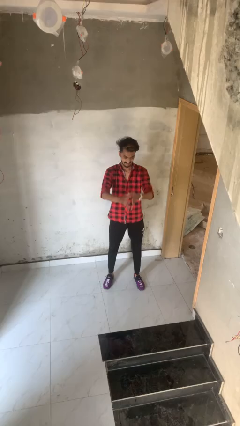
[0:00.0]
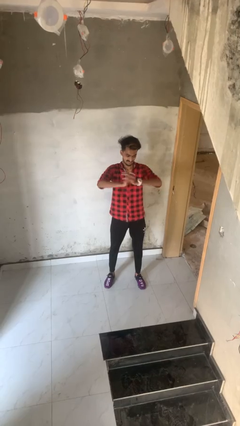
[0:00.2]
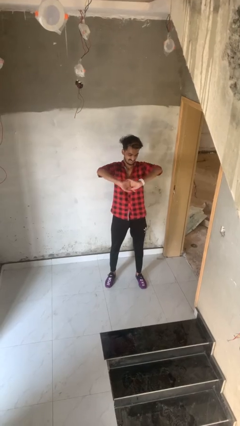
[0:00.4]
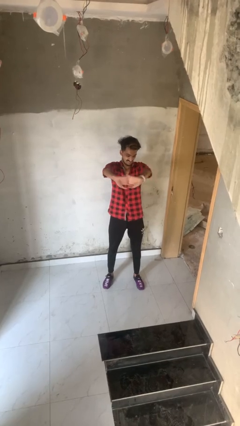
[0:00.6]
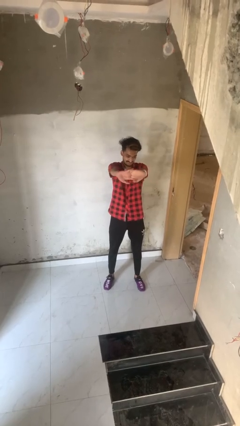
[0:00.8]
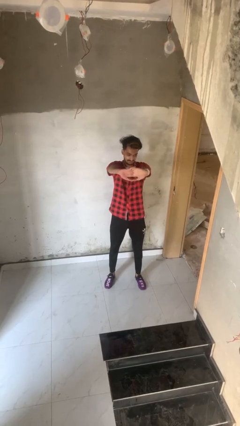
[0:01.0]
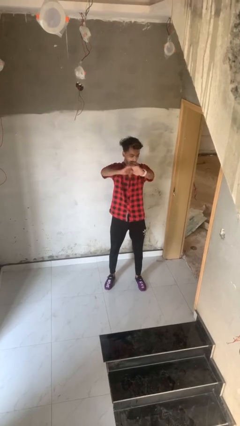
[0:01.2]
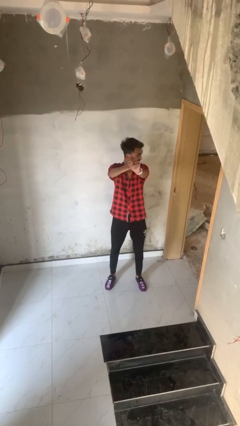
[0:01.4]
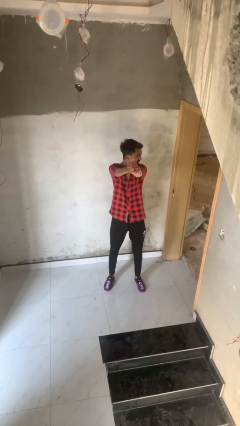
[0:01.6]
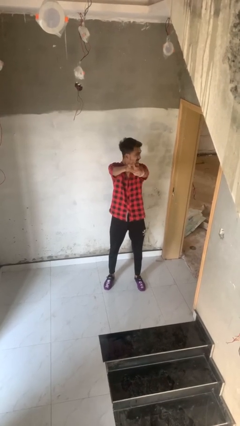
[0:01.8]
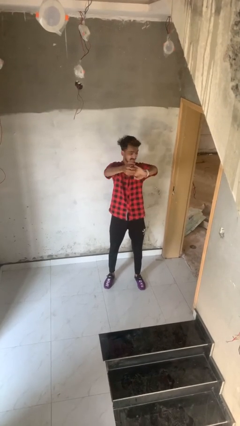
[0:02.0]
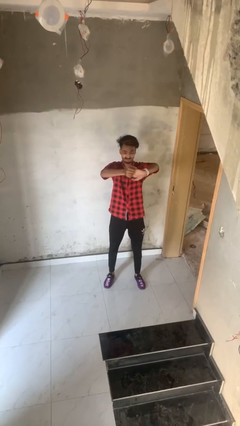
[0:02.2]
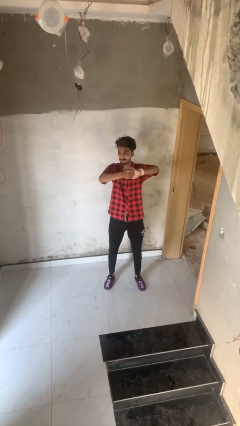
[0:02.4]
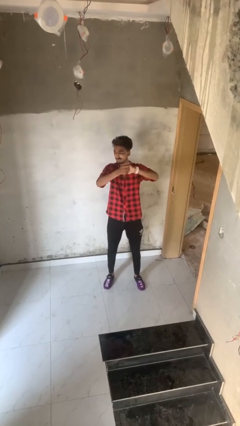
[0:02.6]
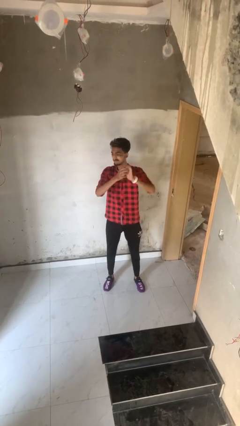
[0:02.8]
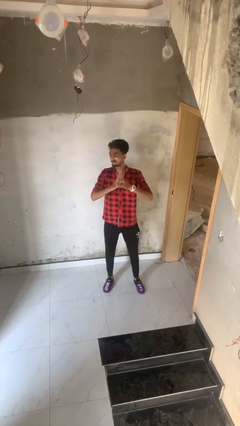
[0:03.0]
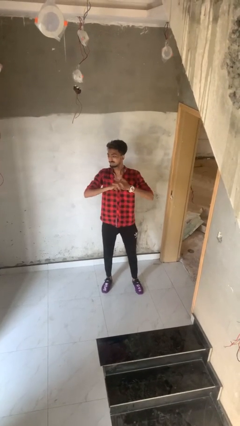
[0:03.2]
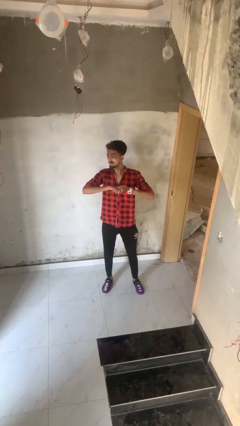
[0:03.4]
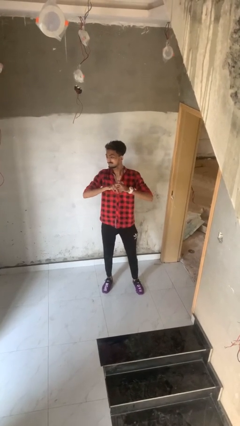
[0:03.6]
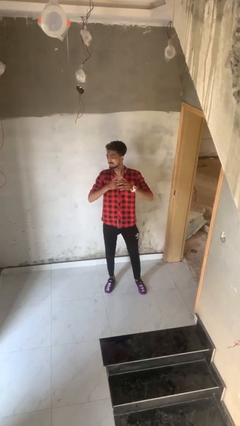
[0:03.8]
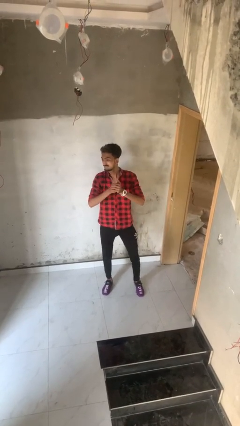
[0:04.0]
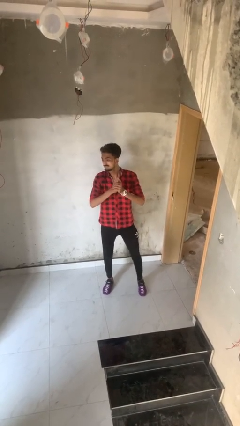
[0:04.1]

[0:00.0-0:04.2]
person cracks knuckles

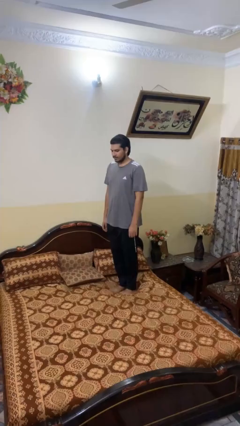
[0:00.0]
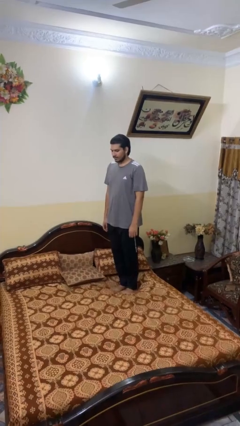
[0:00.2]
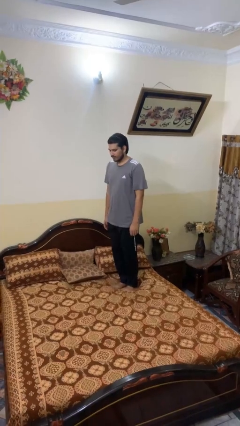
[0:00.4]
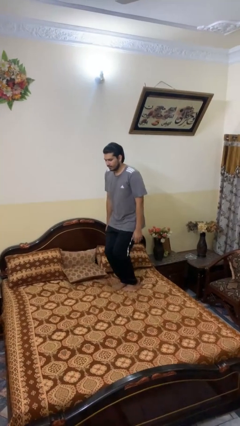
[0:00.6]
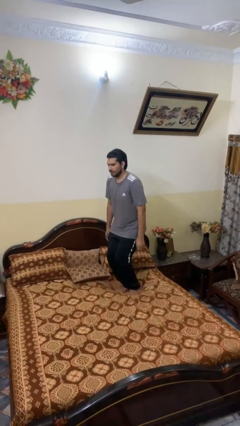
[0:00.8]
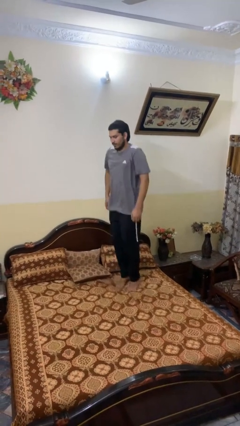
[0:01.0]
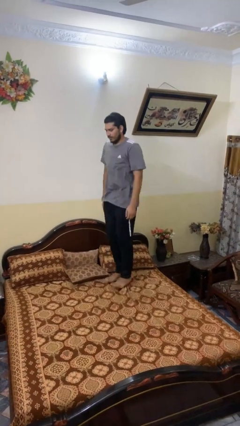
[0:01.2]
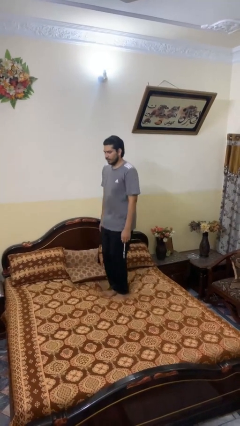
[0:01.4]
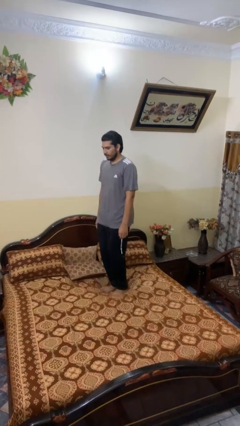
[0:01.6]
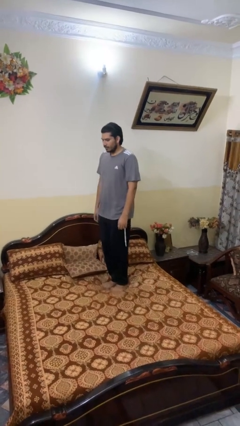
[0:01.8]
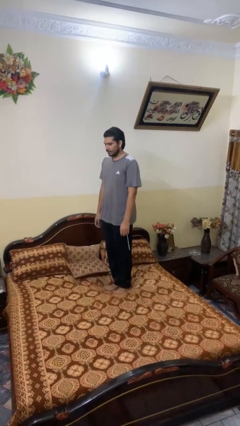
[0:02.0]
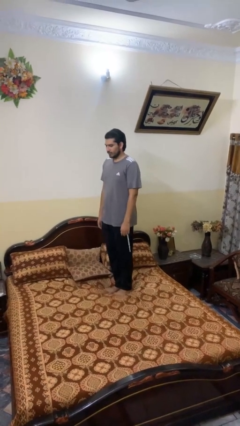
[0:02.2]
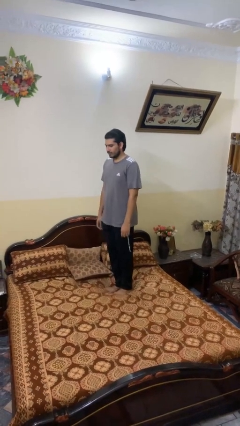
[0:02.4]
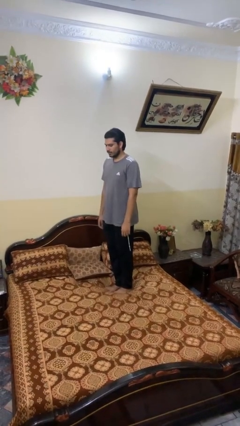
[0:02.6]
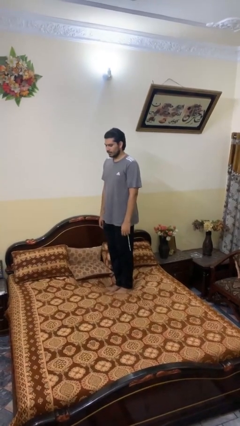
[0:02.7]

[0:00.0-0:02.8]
person jumps on bed

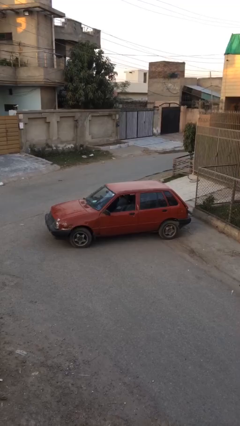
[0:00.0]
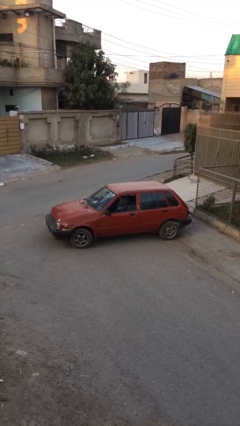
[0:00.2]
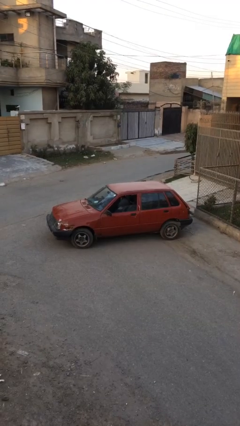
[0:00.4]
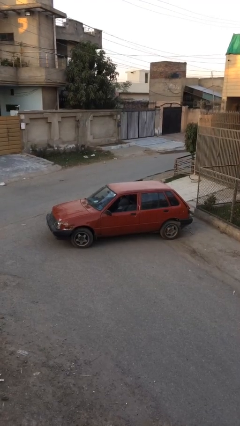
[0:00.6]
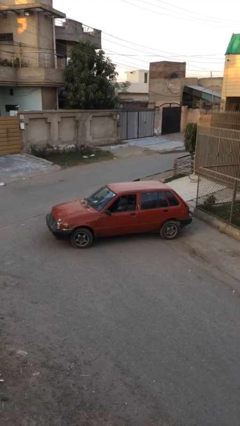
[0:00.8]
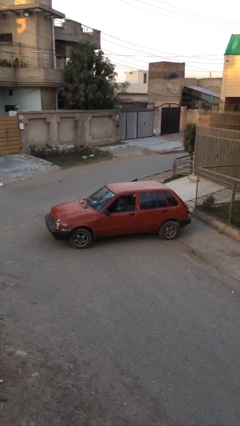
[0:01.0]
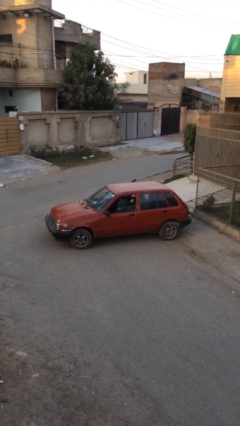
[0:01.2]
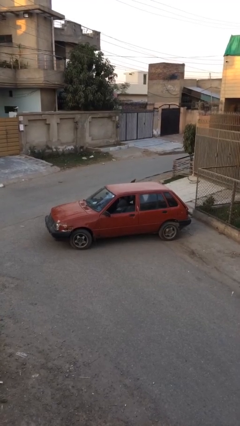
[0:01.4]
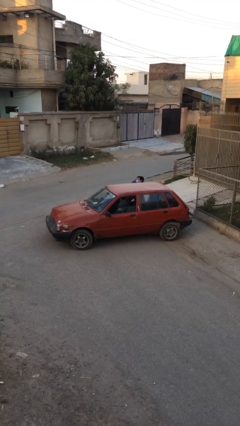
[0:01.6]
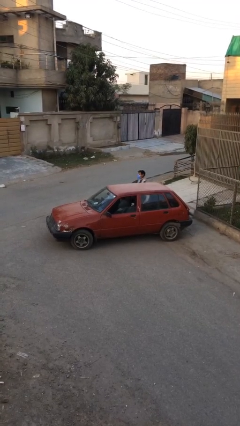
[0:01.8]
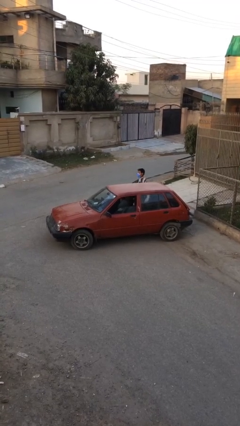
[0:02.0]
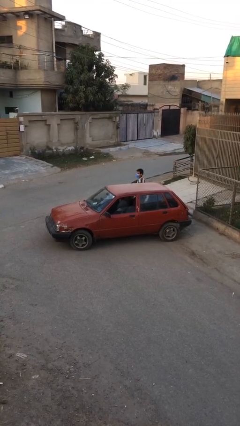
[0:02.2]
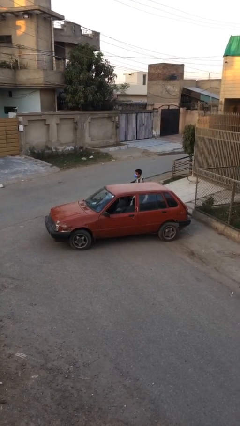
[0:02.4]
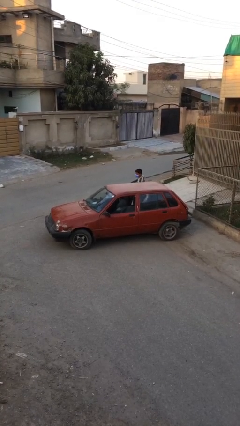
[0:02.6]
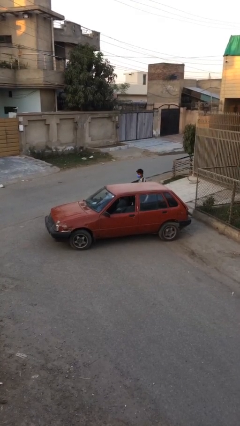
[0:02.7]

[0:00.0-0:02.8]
car drops off person

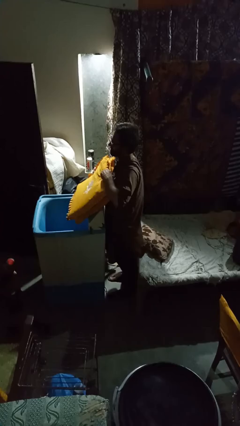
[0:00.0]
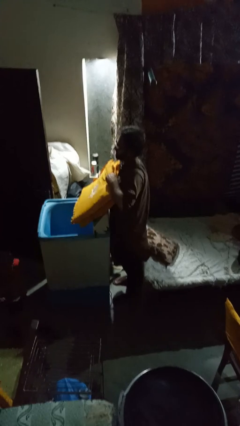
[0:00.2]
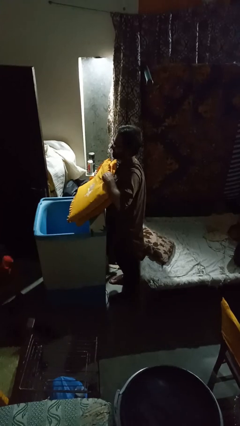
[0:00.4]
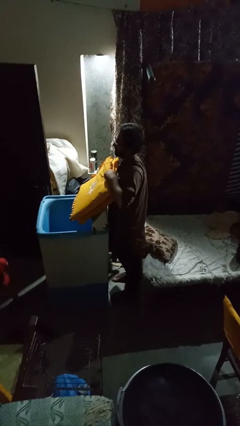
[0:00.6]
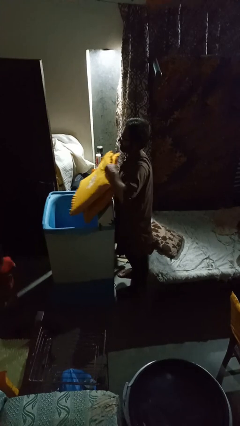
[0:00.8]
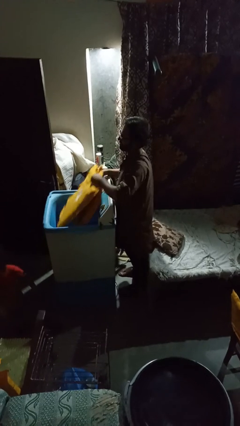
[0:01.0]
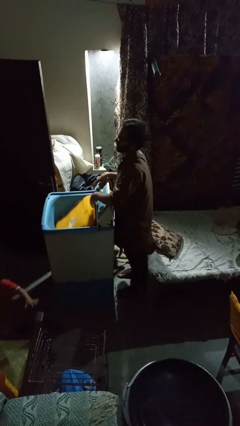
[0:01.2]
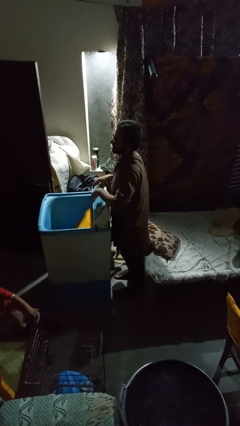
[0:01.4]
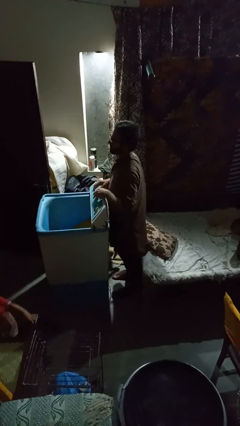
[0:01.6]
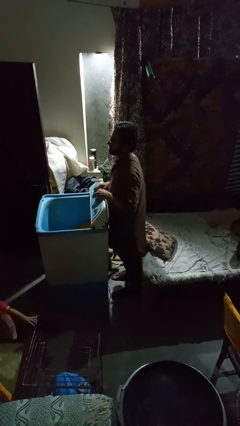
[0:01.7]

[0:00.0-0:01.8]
person loads clotheswasher

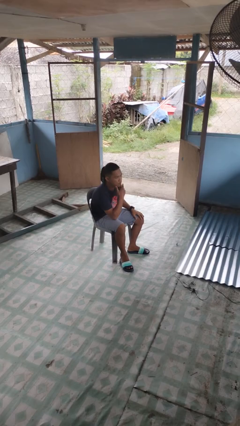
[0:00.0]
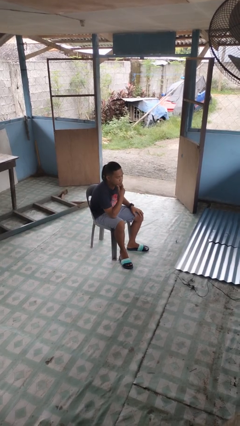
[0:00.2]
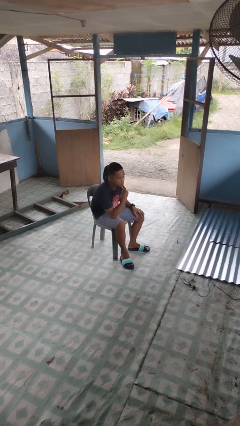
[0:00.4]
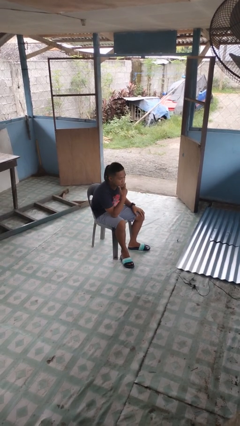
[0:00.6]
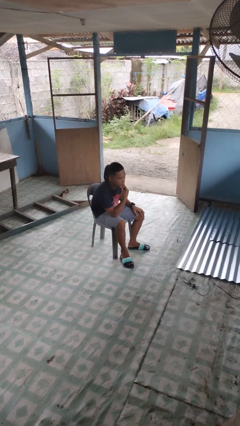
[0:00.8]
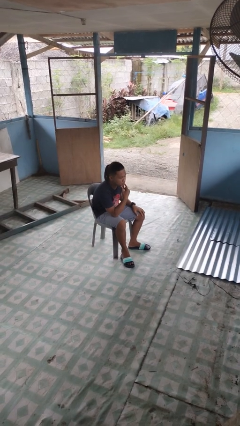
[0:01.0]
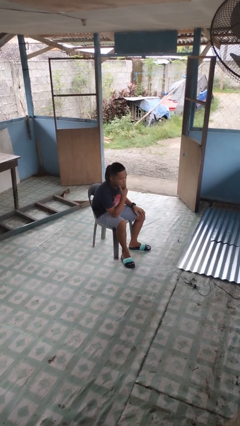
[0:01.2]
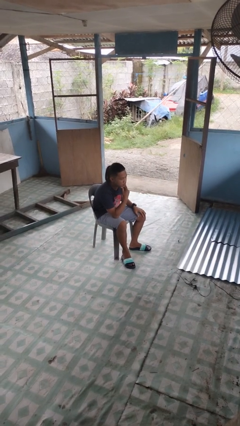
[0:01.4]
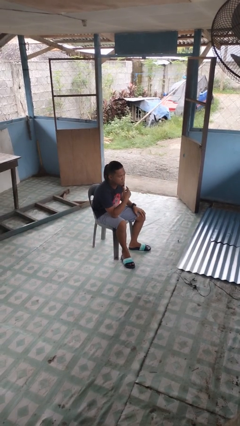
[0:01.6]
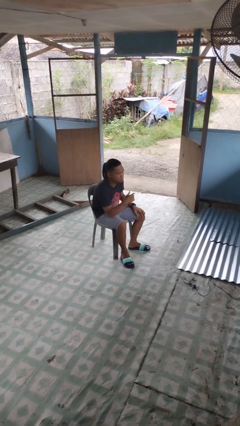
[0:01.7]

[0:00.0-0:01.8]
person strokes chin

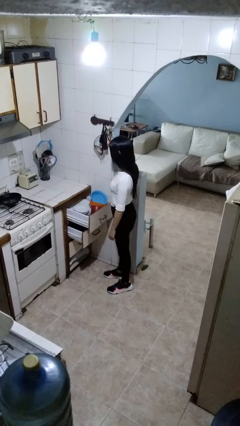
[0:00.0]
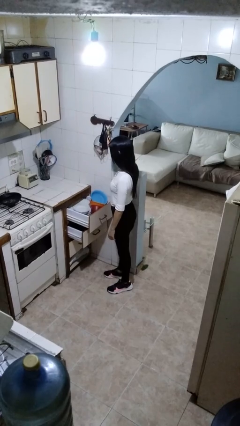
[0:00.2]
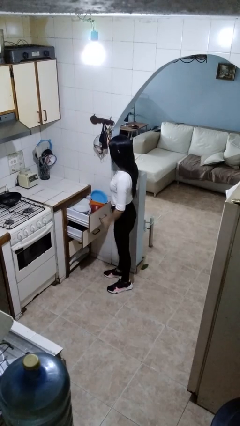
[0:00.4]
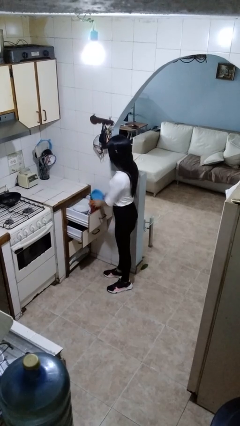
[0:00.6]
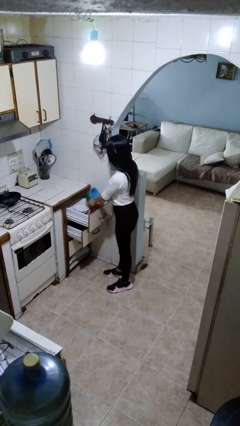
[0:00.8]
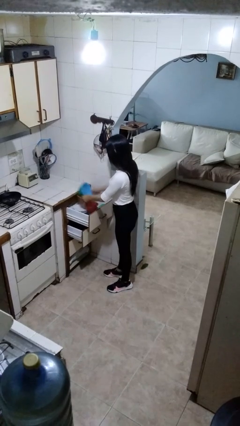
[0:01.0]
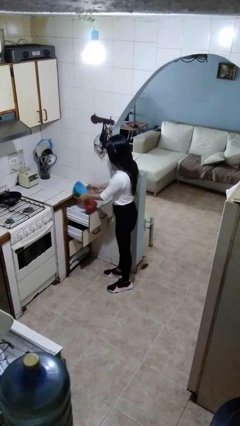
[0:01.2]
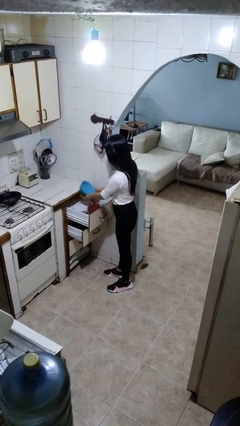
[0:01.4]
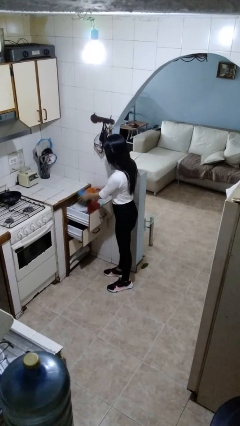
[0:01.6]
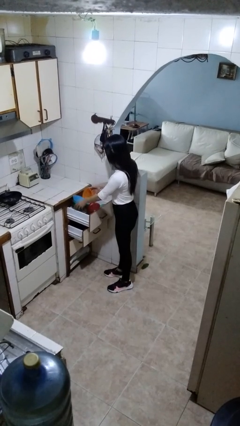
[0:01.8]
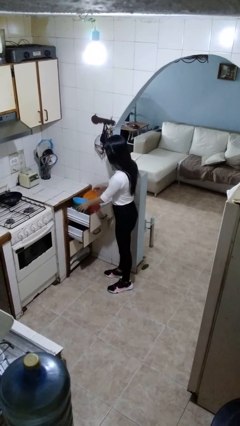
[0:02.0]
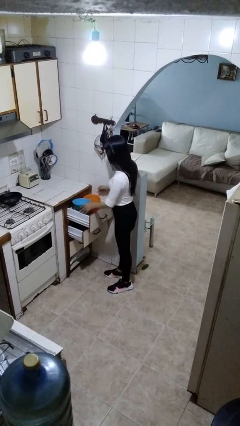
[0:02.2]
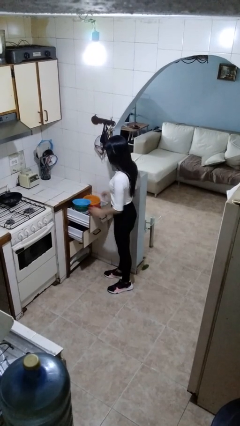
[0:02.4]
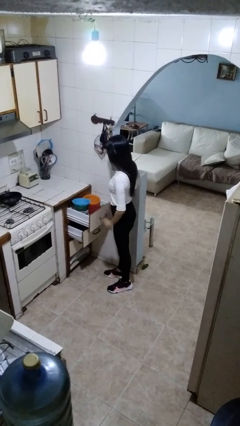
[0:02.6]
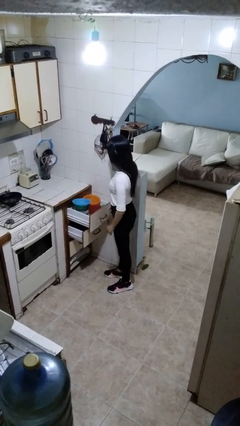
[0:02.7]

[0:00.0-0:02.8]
person searches in kitchen drawer

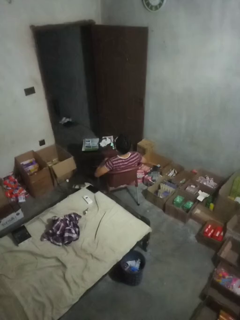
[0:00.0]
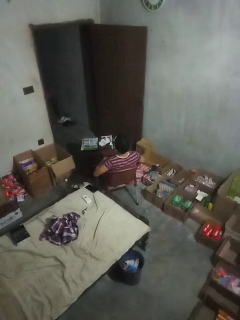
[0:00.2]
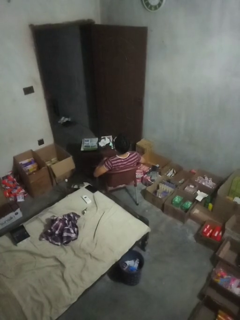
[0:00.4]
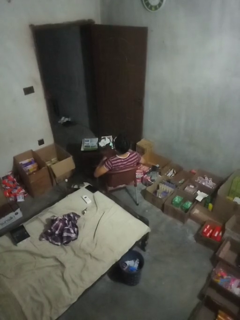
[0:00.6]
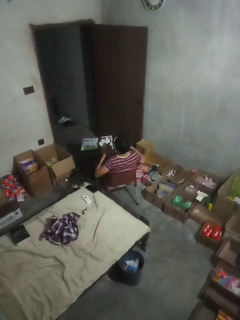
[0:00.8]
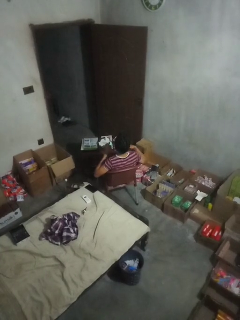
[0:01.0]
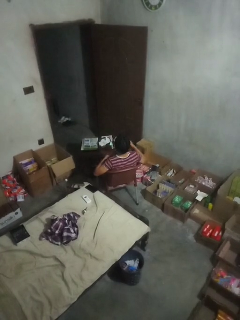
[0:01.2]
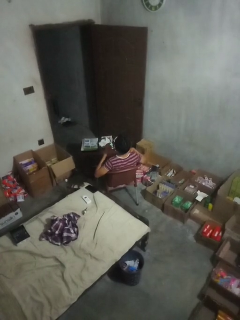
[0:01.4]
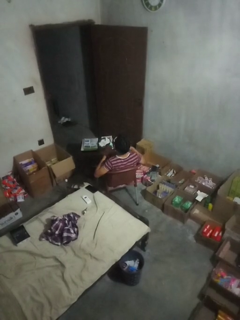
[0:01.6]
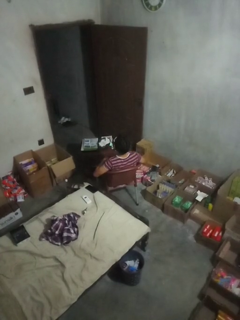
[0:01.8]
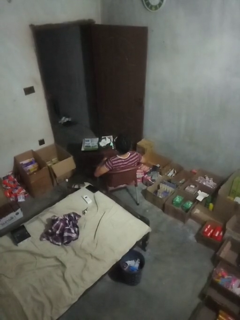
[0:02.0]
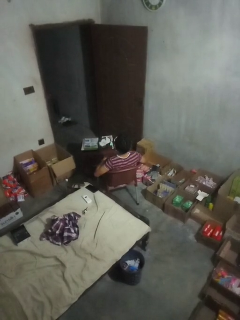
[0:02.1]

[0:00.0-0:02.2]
person drums on chest
